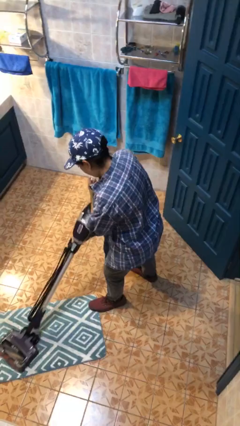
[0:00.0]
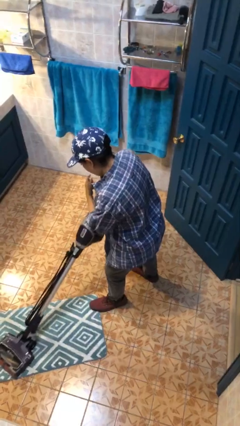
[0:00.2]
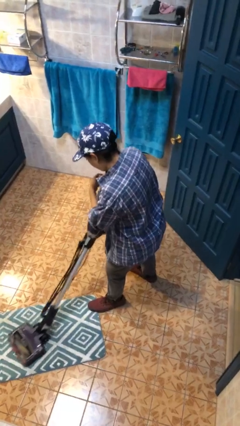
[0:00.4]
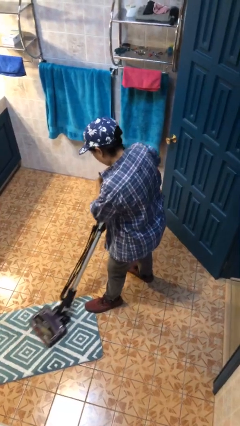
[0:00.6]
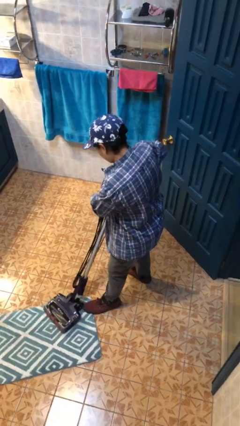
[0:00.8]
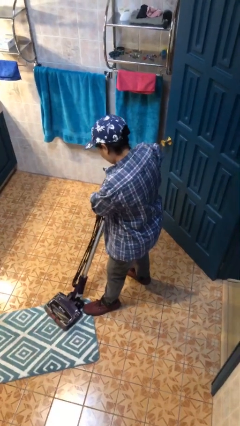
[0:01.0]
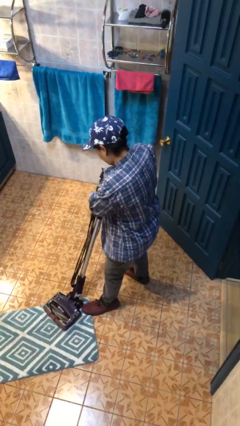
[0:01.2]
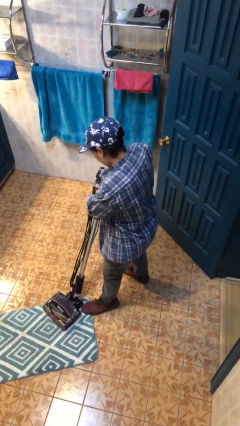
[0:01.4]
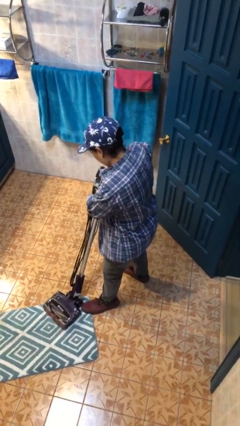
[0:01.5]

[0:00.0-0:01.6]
person vacuums carpet

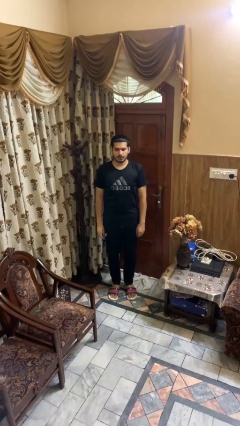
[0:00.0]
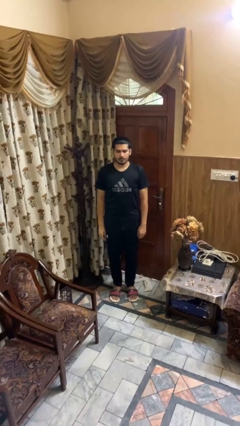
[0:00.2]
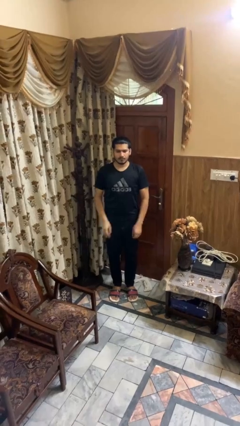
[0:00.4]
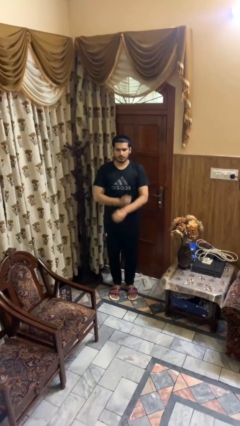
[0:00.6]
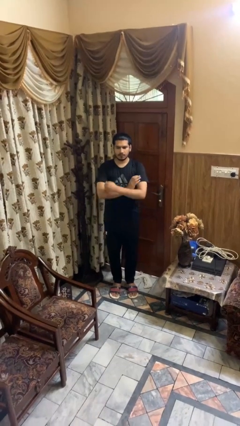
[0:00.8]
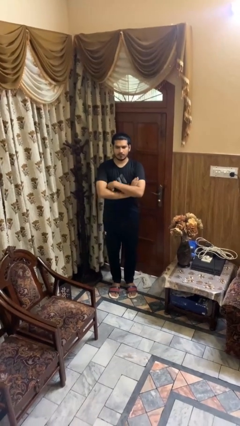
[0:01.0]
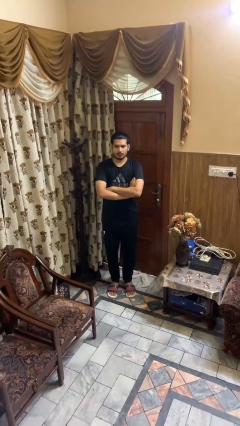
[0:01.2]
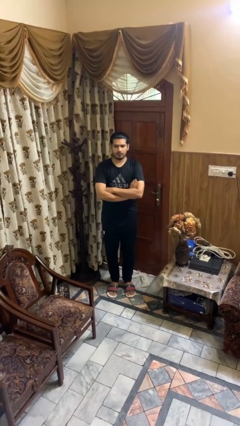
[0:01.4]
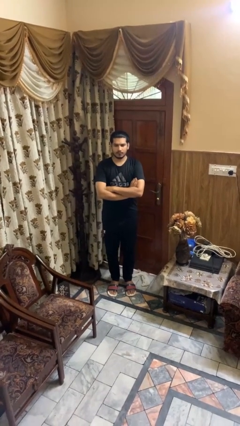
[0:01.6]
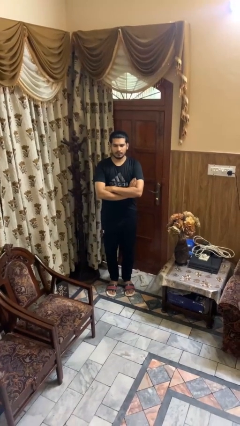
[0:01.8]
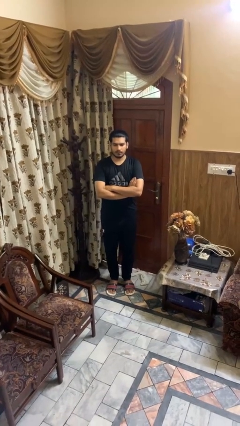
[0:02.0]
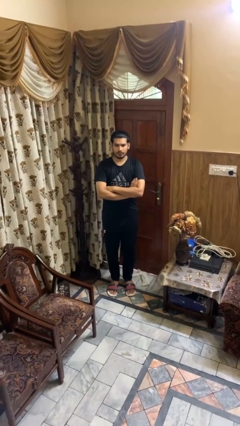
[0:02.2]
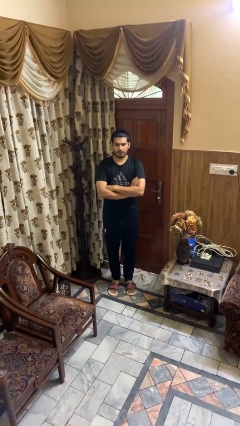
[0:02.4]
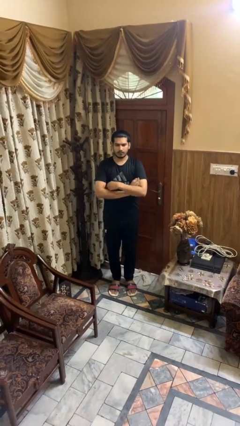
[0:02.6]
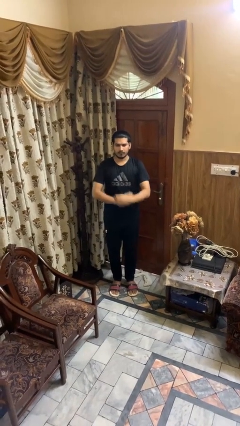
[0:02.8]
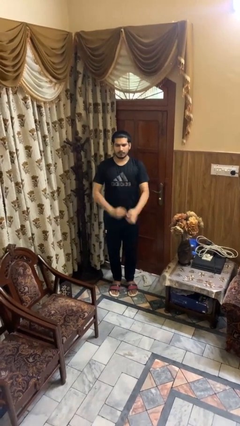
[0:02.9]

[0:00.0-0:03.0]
person crosses arms

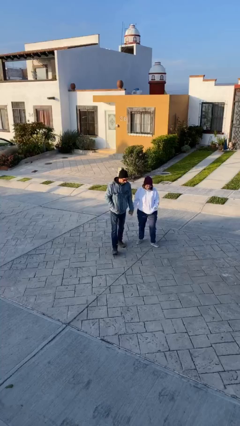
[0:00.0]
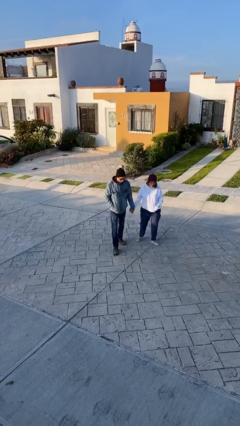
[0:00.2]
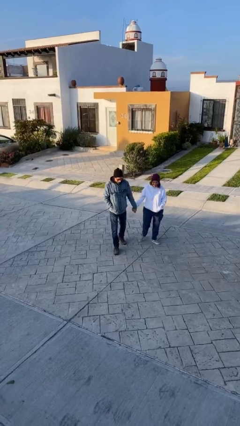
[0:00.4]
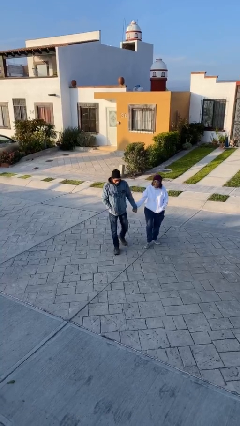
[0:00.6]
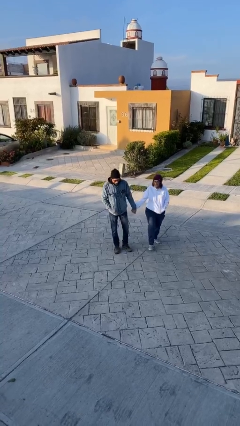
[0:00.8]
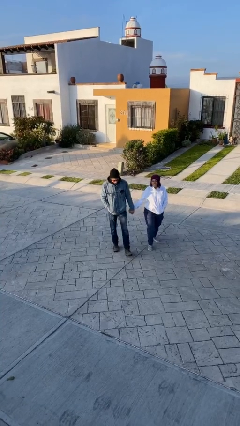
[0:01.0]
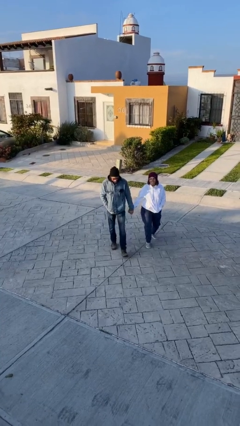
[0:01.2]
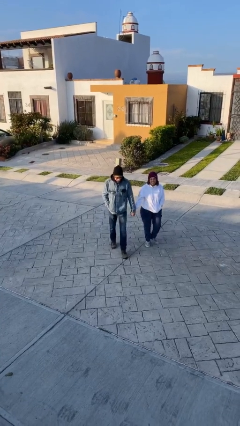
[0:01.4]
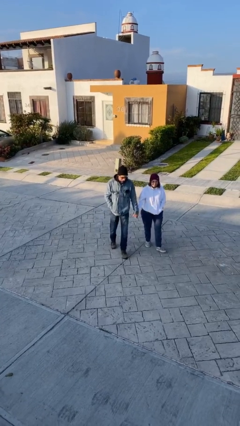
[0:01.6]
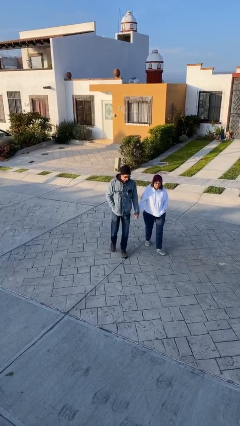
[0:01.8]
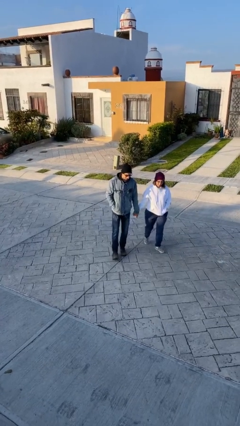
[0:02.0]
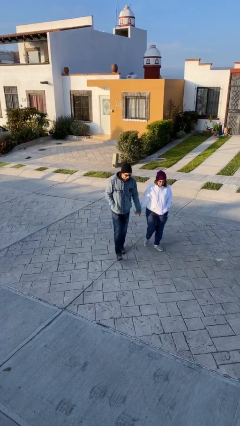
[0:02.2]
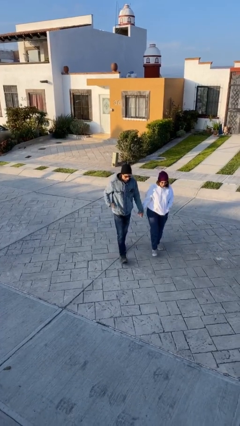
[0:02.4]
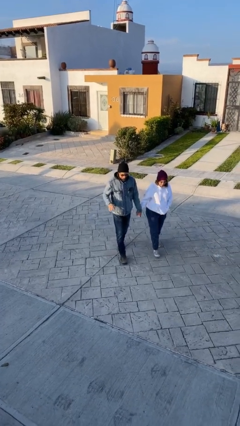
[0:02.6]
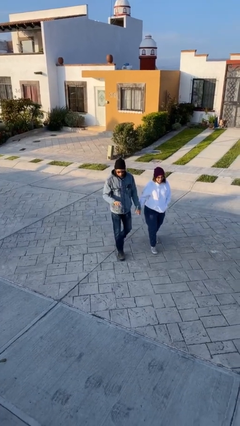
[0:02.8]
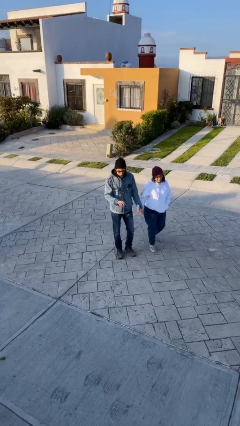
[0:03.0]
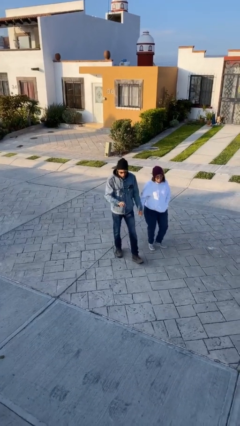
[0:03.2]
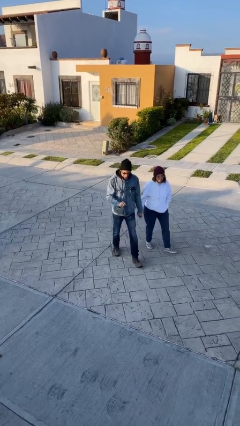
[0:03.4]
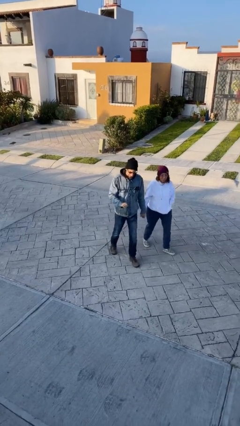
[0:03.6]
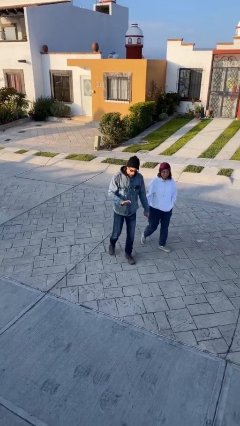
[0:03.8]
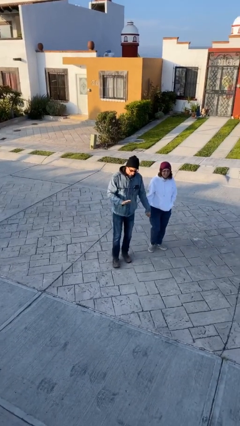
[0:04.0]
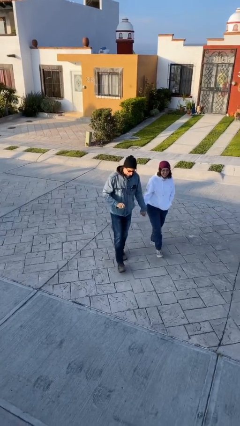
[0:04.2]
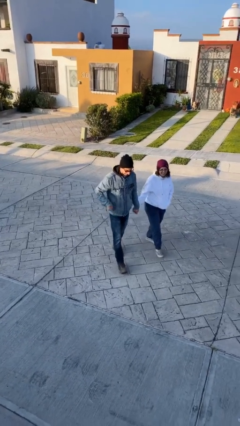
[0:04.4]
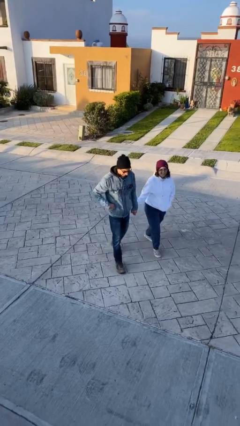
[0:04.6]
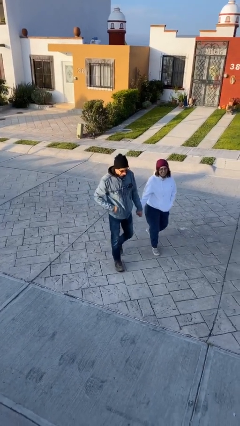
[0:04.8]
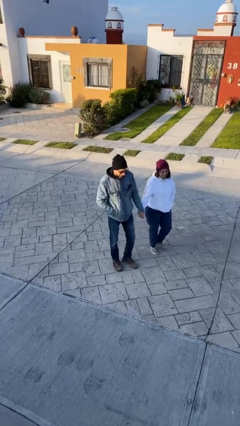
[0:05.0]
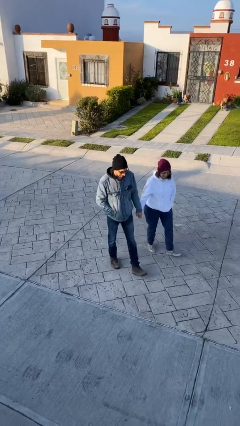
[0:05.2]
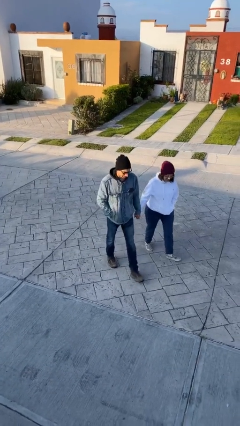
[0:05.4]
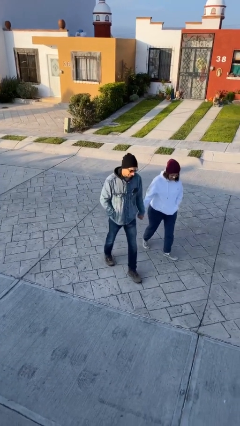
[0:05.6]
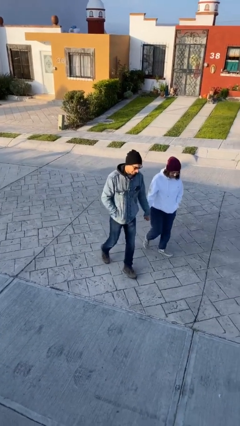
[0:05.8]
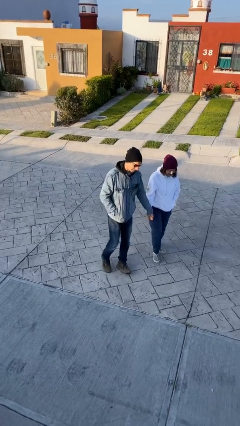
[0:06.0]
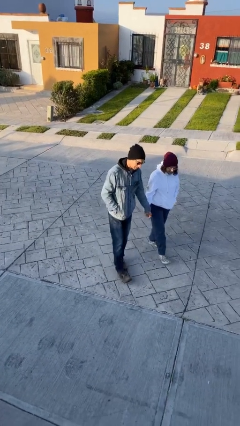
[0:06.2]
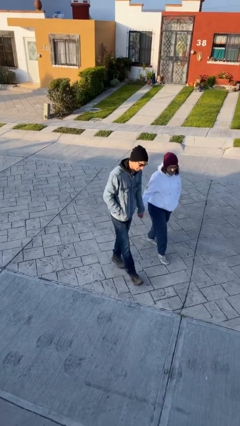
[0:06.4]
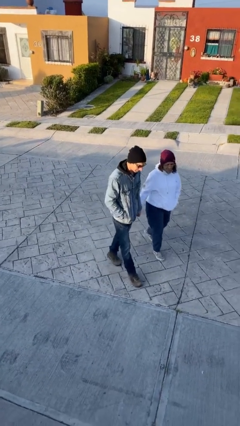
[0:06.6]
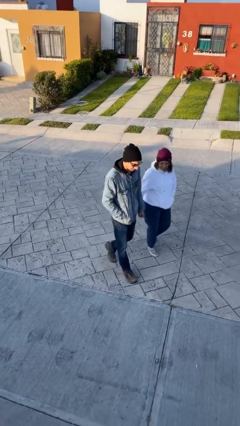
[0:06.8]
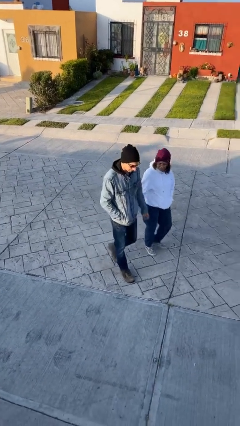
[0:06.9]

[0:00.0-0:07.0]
person holds hand

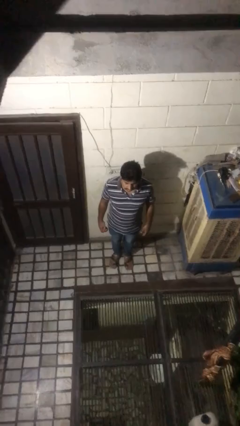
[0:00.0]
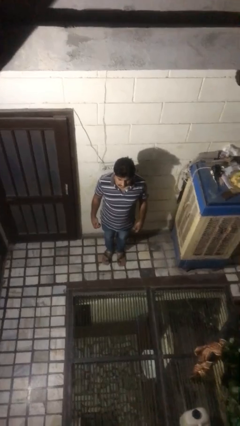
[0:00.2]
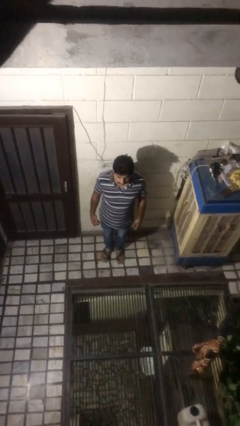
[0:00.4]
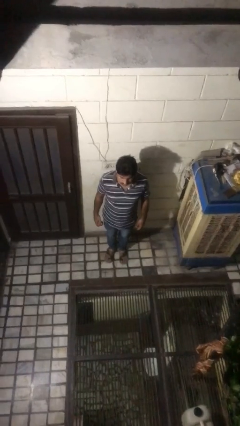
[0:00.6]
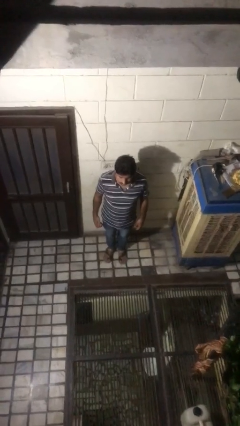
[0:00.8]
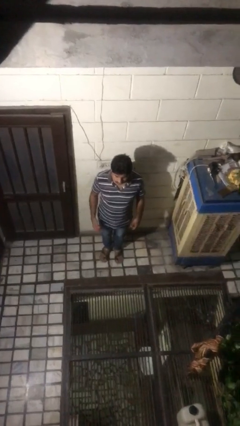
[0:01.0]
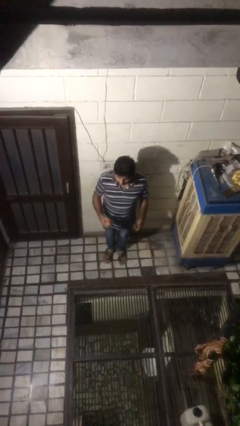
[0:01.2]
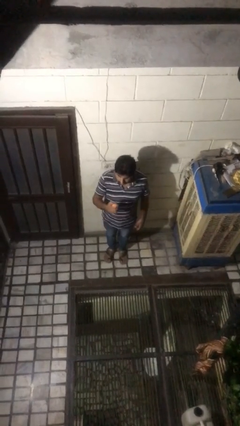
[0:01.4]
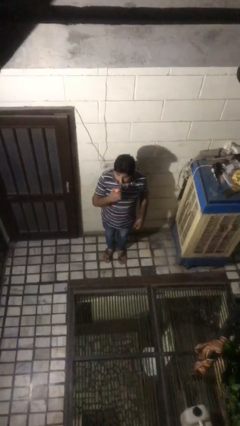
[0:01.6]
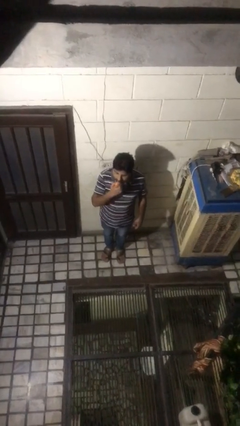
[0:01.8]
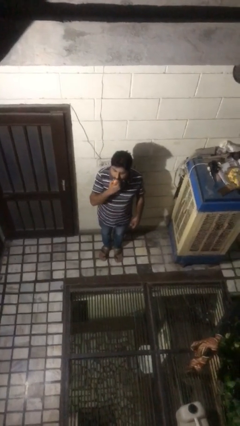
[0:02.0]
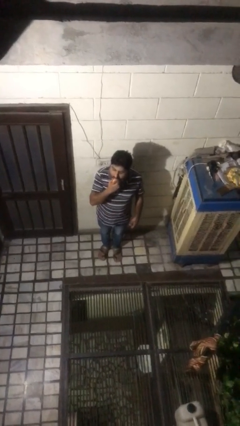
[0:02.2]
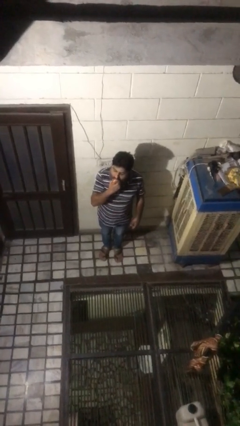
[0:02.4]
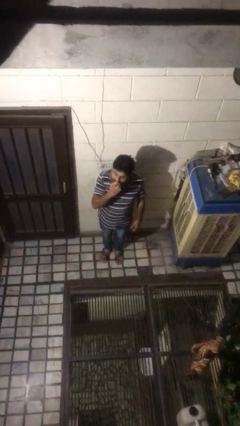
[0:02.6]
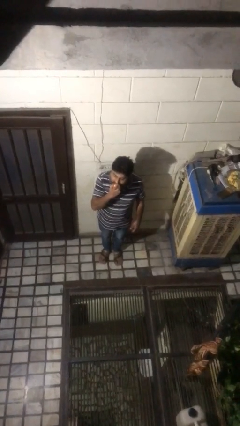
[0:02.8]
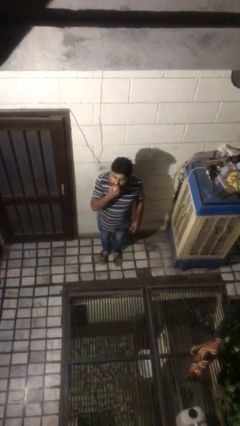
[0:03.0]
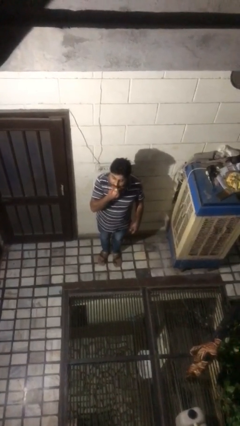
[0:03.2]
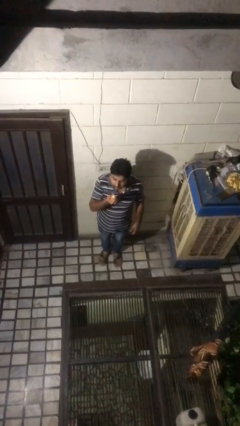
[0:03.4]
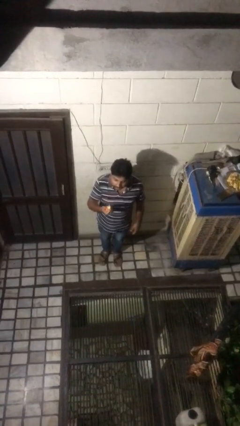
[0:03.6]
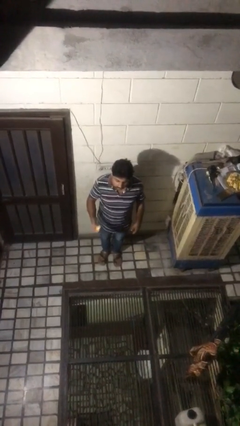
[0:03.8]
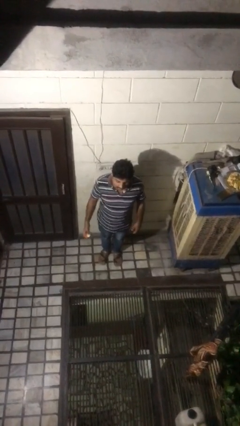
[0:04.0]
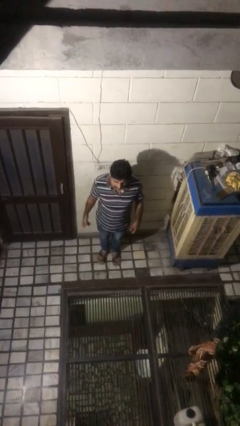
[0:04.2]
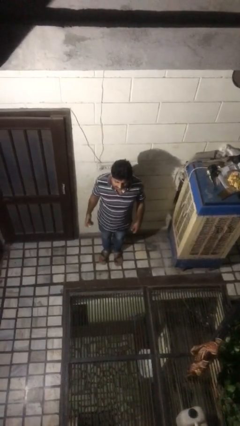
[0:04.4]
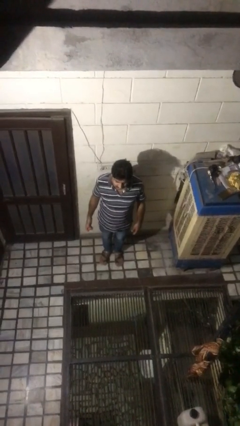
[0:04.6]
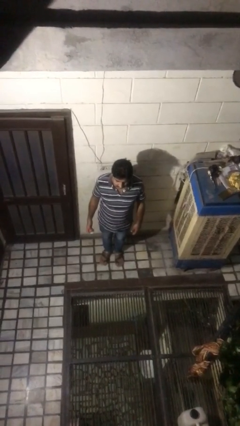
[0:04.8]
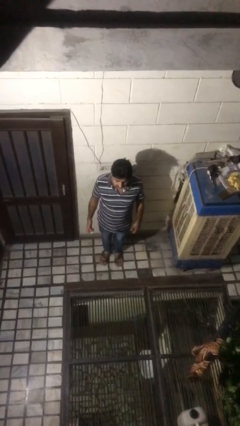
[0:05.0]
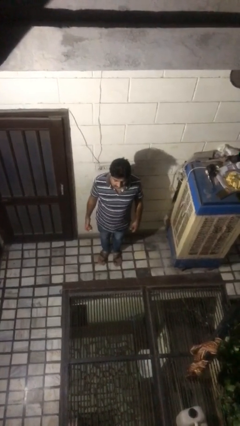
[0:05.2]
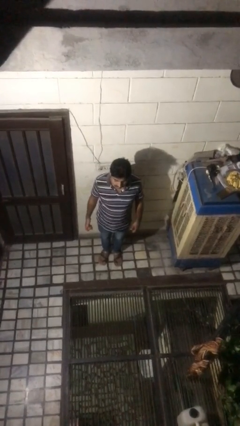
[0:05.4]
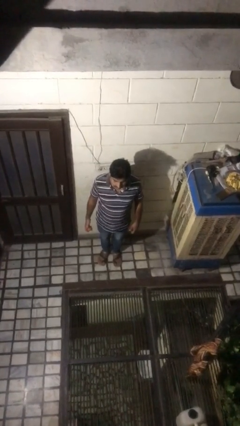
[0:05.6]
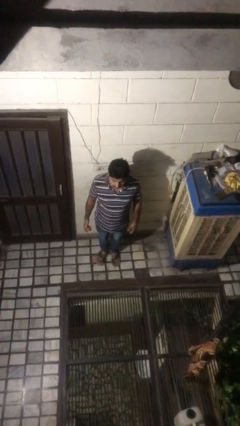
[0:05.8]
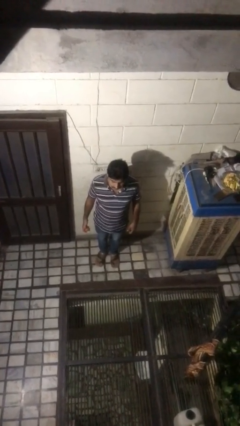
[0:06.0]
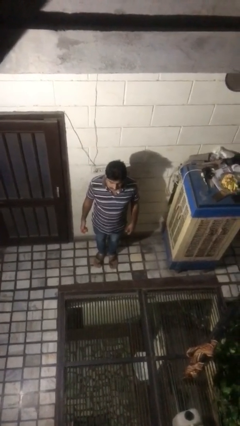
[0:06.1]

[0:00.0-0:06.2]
person eats apple
